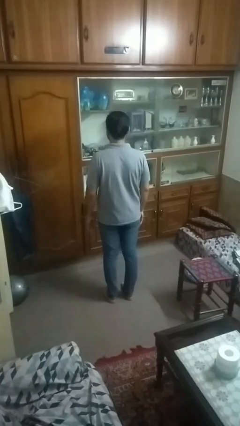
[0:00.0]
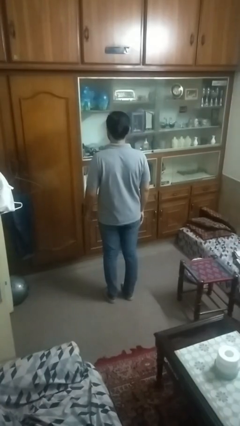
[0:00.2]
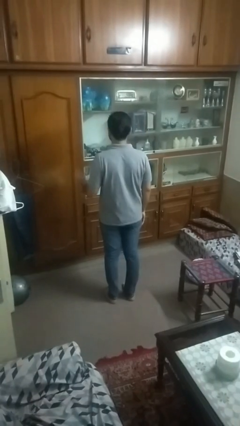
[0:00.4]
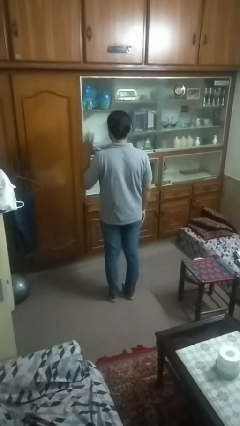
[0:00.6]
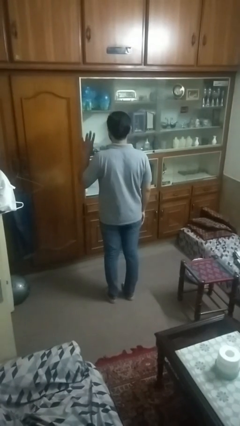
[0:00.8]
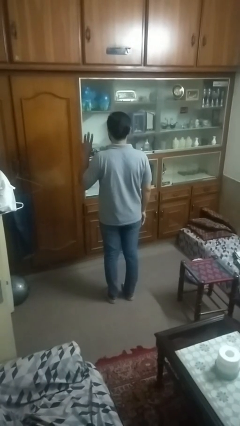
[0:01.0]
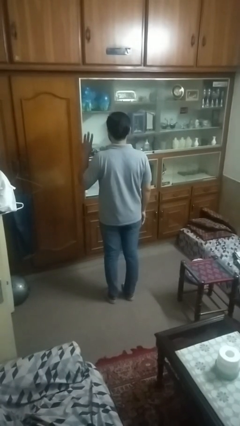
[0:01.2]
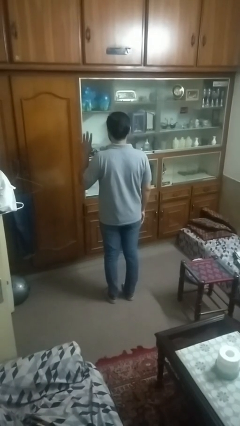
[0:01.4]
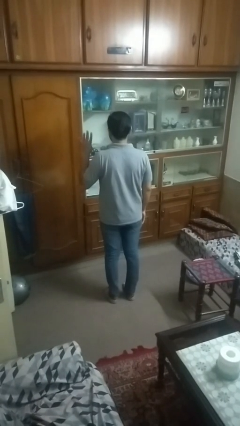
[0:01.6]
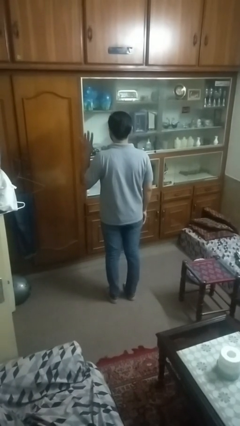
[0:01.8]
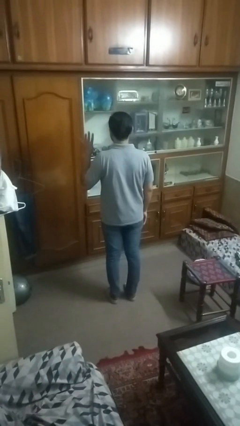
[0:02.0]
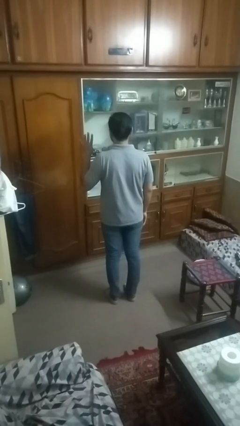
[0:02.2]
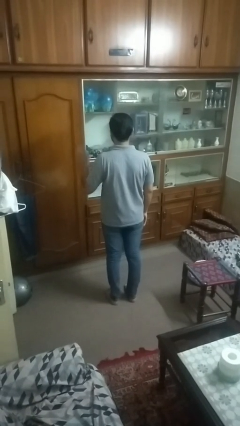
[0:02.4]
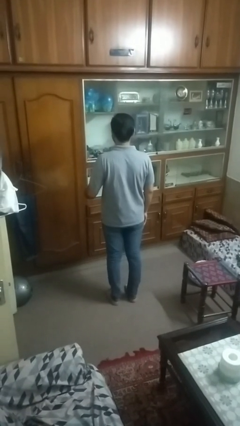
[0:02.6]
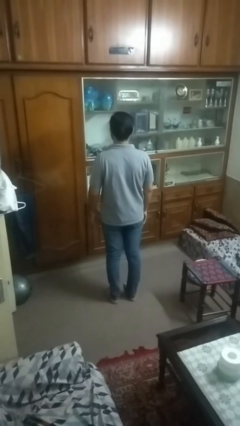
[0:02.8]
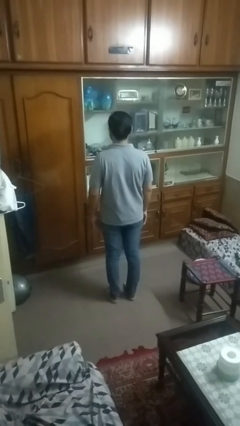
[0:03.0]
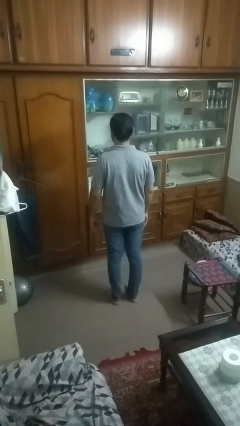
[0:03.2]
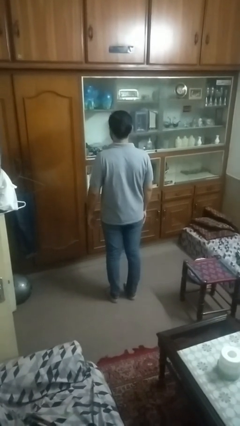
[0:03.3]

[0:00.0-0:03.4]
person gestures number four

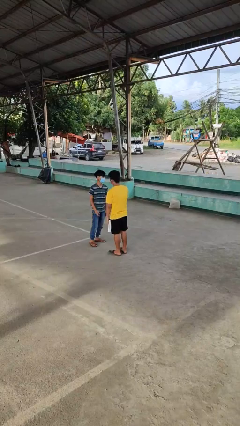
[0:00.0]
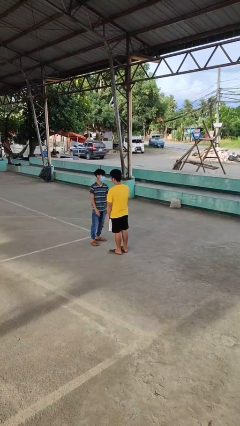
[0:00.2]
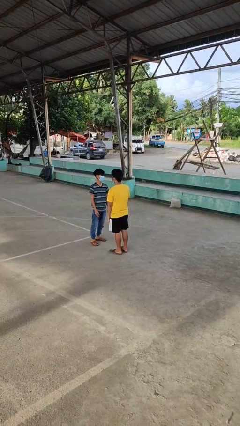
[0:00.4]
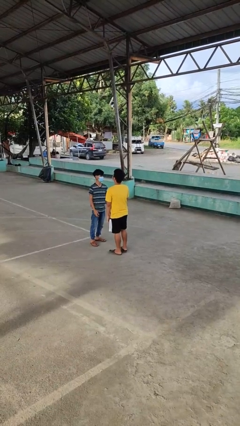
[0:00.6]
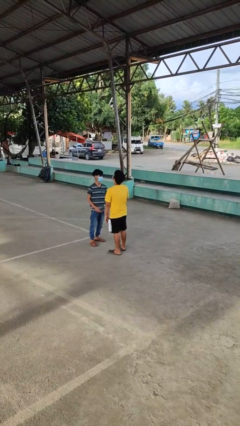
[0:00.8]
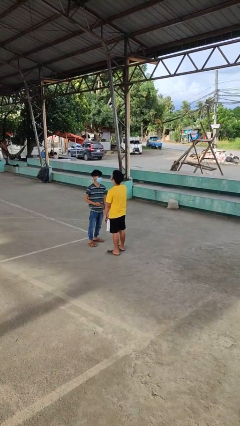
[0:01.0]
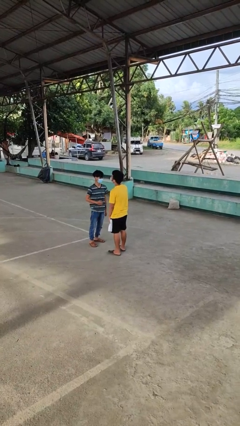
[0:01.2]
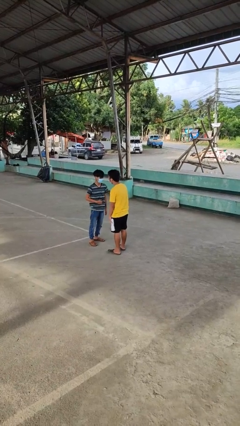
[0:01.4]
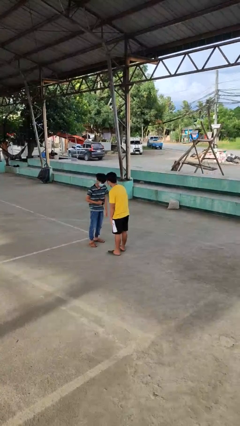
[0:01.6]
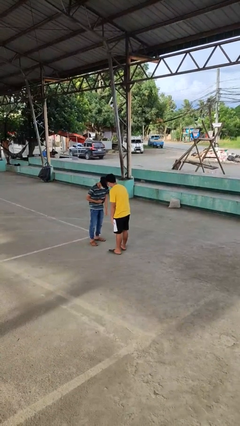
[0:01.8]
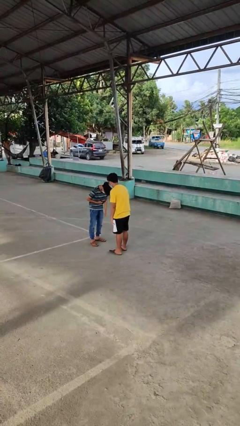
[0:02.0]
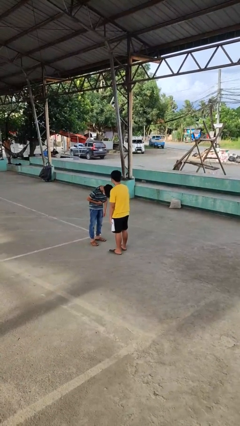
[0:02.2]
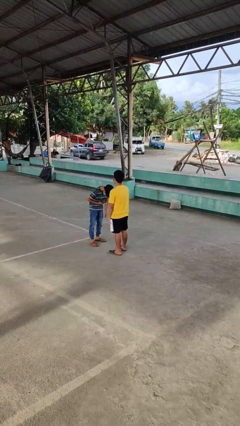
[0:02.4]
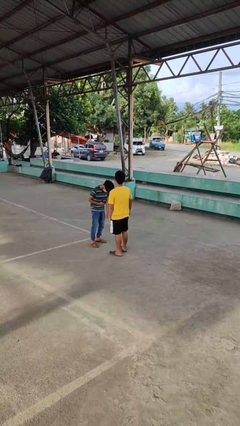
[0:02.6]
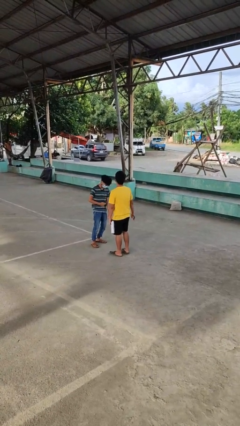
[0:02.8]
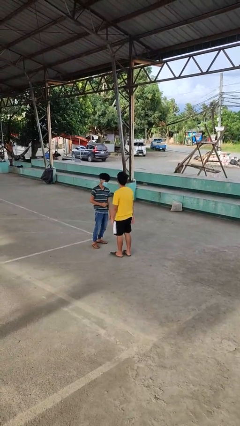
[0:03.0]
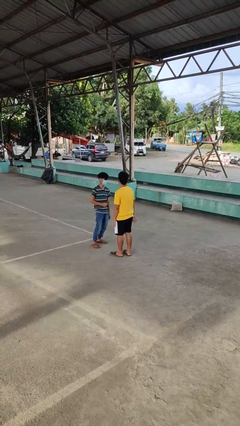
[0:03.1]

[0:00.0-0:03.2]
person laughs with person

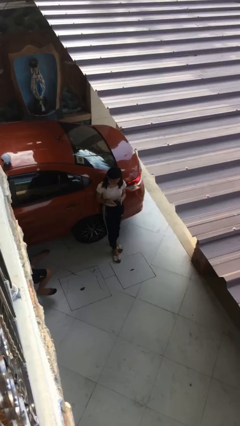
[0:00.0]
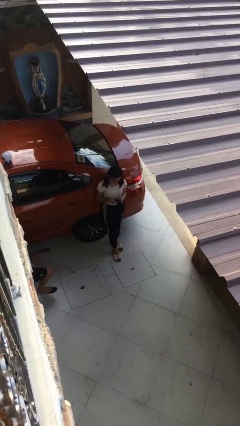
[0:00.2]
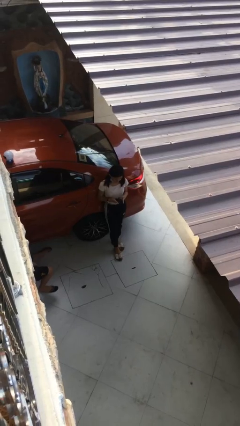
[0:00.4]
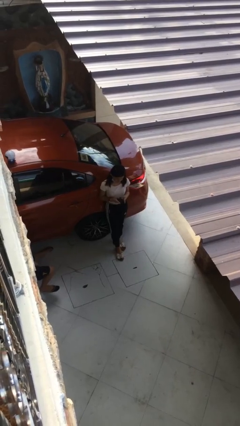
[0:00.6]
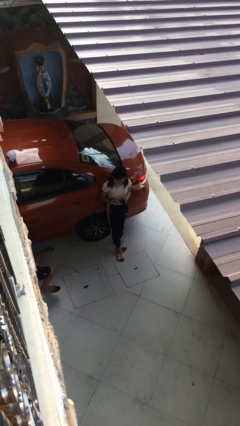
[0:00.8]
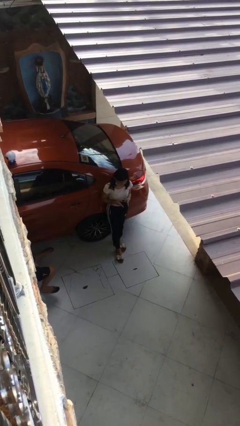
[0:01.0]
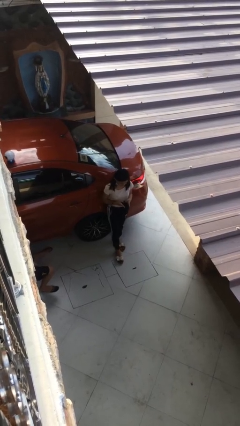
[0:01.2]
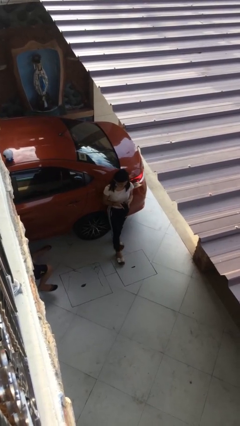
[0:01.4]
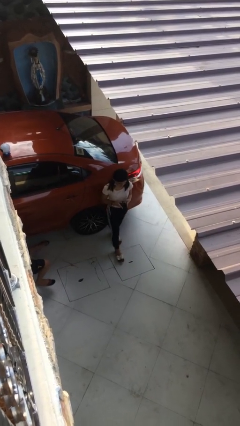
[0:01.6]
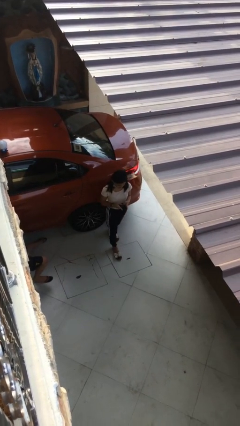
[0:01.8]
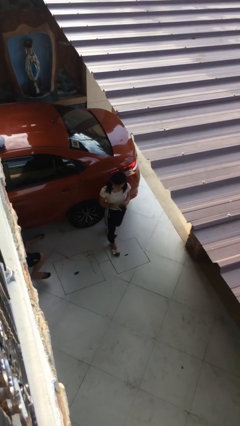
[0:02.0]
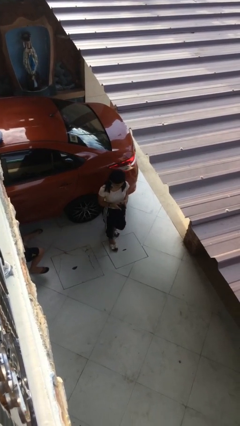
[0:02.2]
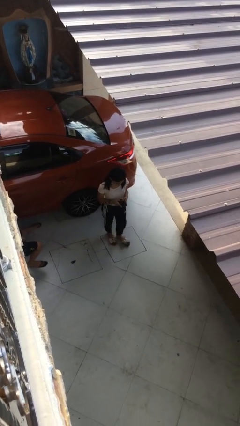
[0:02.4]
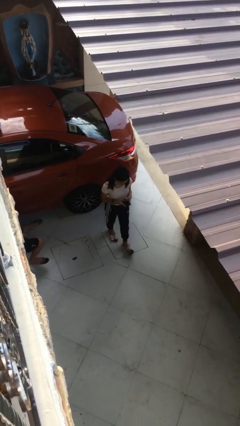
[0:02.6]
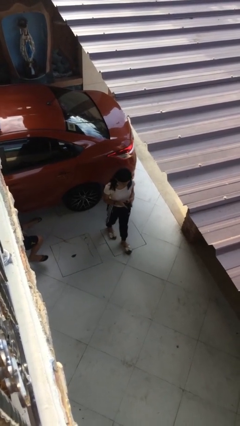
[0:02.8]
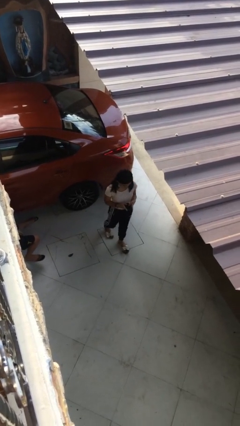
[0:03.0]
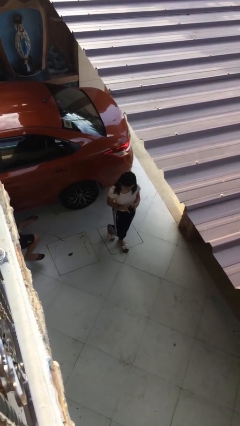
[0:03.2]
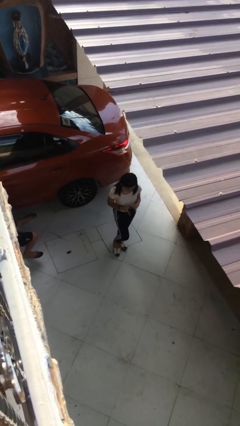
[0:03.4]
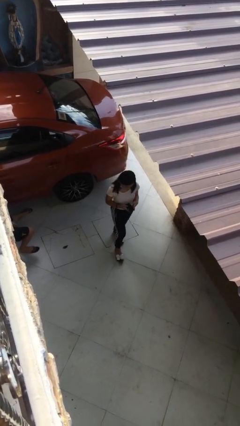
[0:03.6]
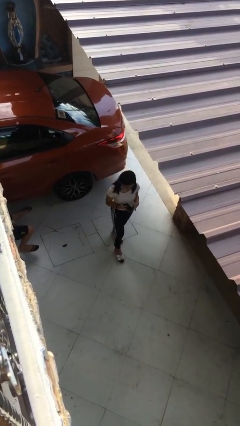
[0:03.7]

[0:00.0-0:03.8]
person texts on phone

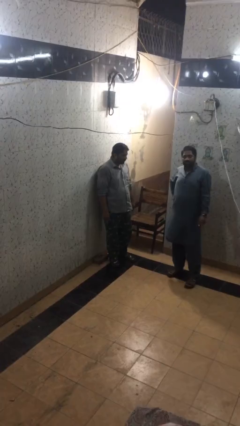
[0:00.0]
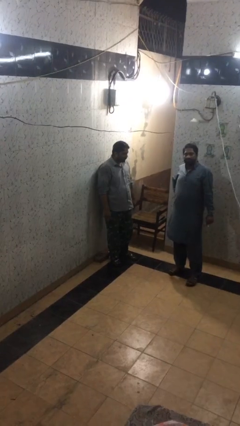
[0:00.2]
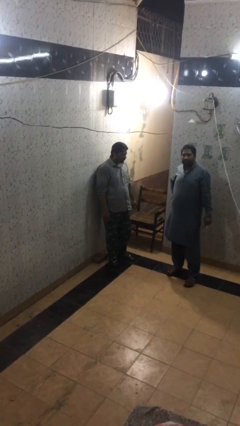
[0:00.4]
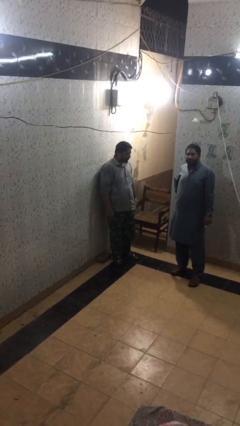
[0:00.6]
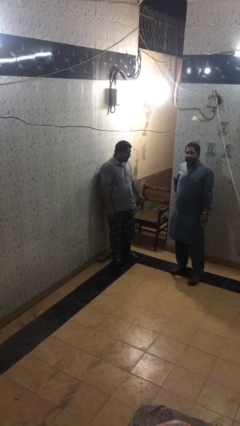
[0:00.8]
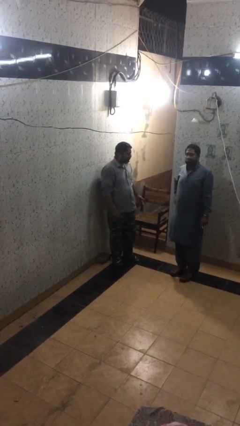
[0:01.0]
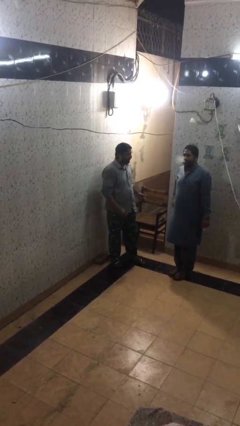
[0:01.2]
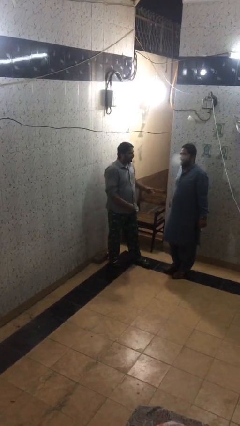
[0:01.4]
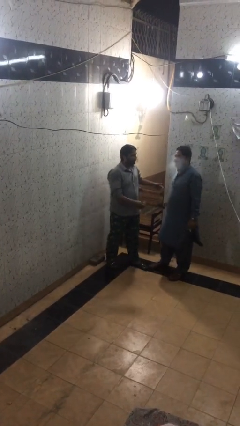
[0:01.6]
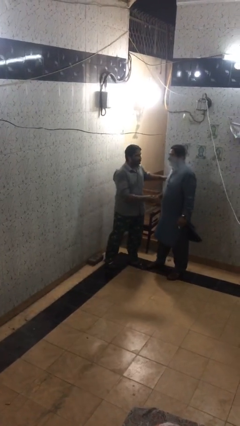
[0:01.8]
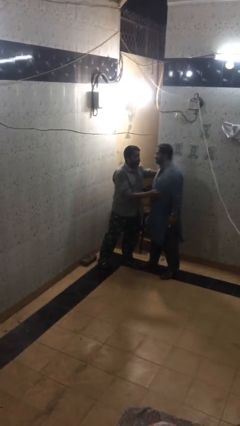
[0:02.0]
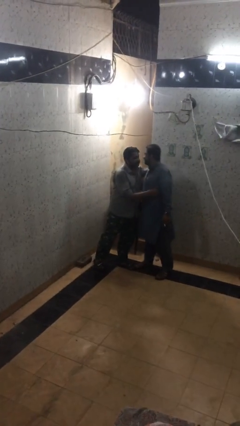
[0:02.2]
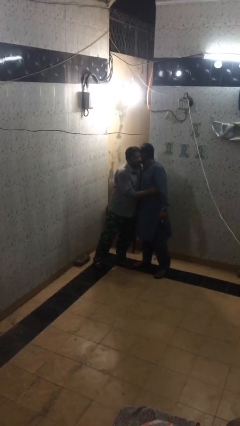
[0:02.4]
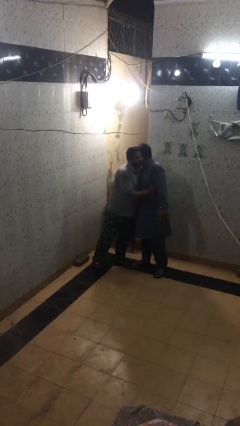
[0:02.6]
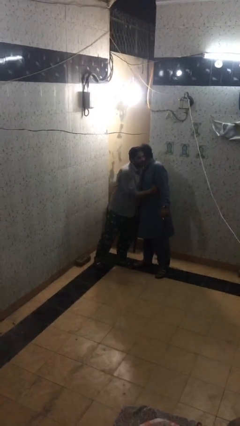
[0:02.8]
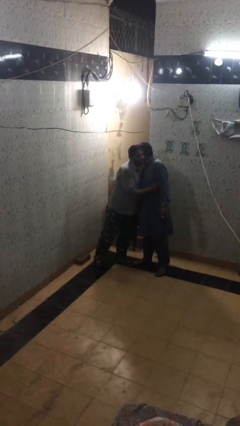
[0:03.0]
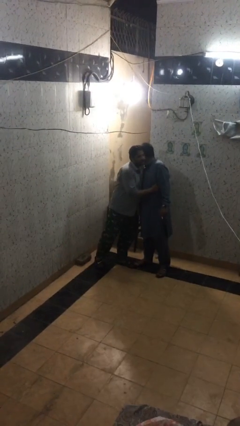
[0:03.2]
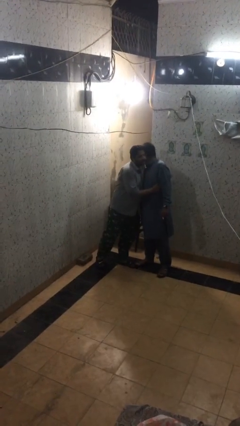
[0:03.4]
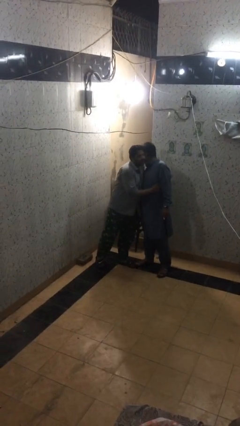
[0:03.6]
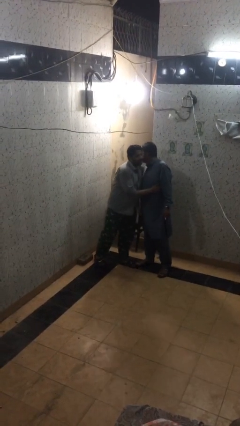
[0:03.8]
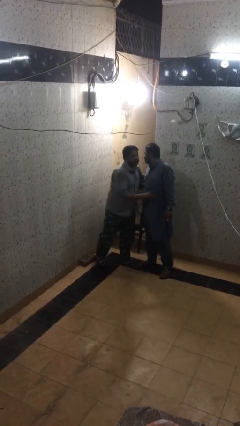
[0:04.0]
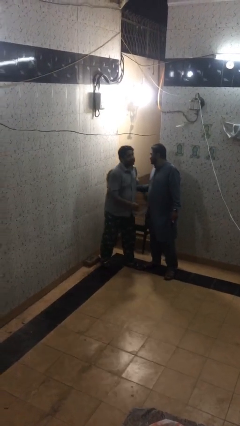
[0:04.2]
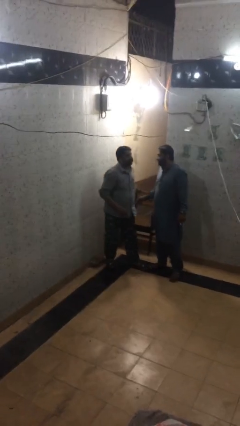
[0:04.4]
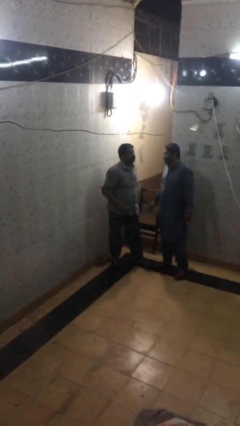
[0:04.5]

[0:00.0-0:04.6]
person embraces person

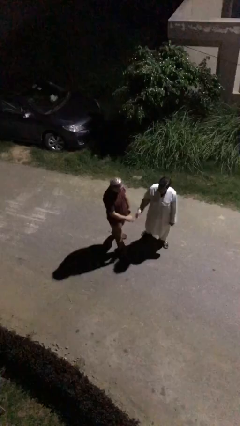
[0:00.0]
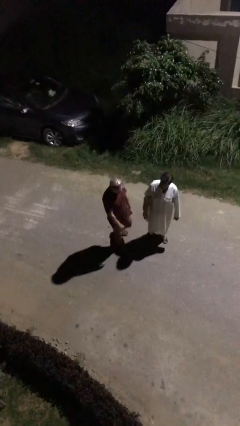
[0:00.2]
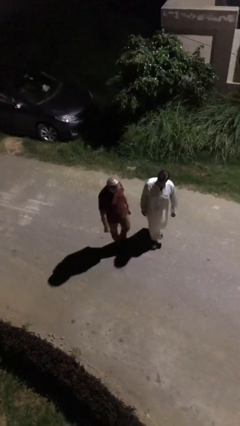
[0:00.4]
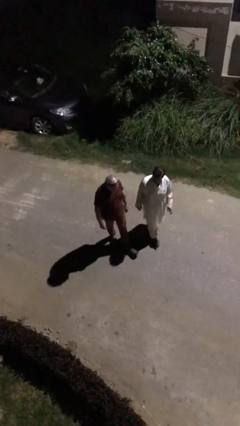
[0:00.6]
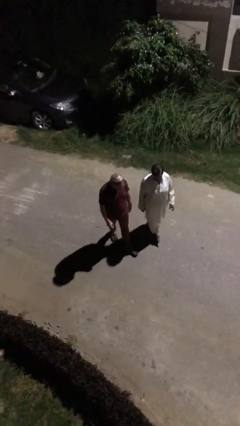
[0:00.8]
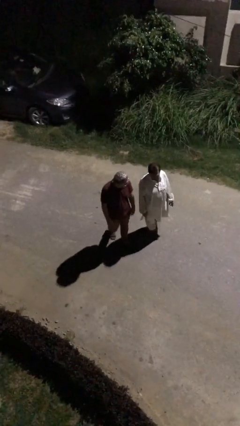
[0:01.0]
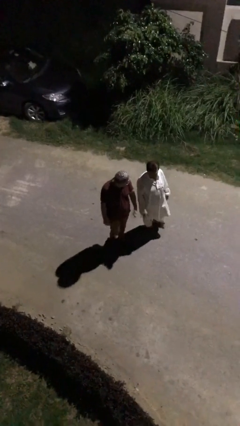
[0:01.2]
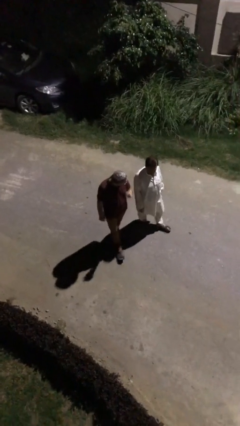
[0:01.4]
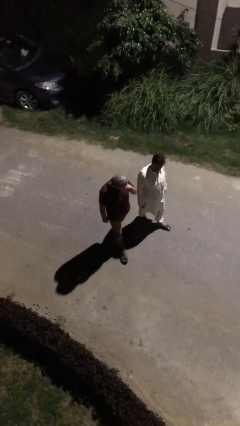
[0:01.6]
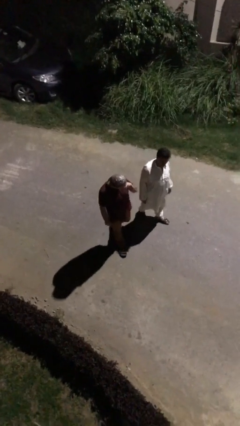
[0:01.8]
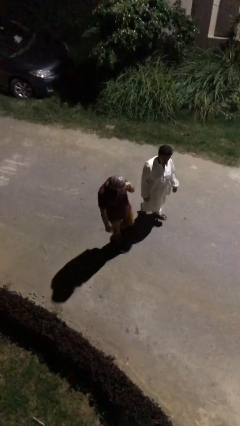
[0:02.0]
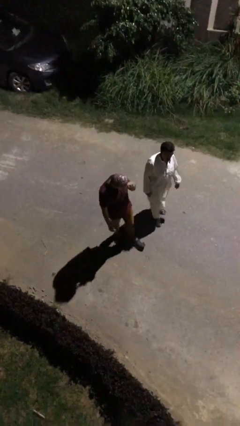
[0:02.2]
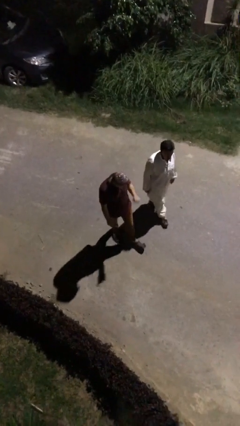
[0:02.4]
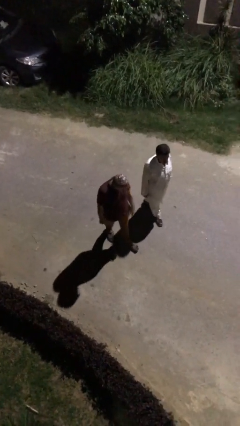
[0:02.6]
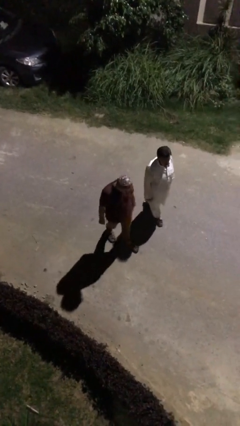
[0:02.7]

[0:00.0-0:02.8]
person talks to person
